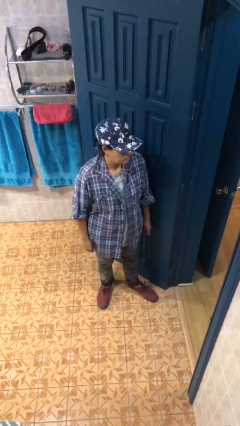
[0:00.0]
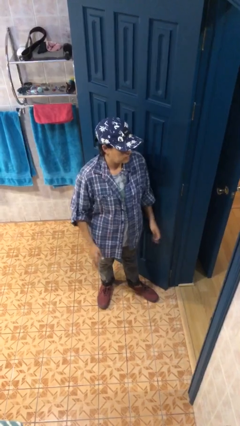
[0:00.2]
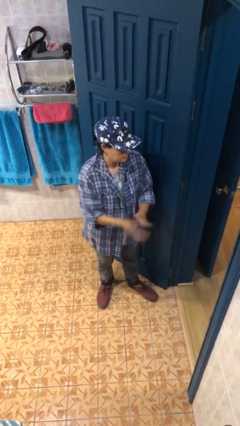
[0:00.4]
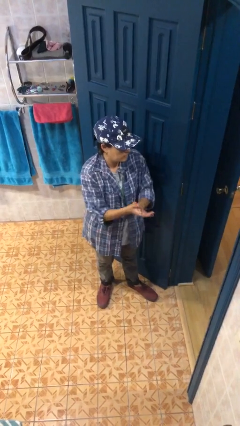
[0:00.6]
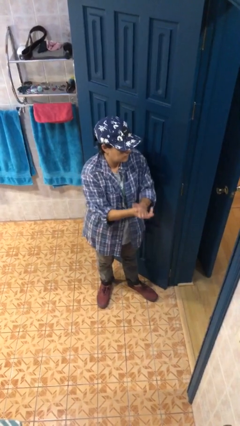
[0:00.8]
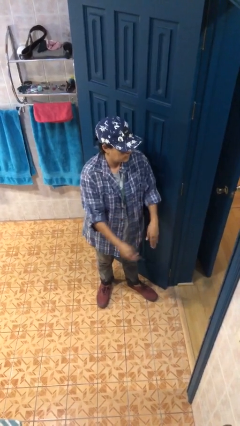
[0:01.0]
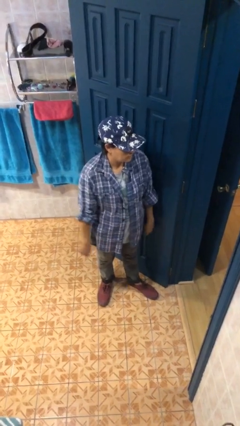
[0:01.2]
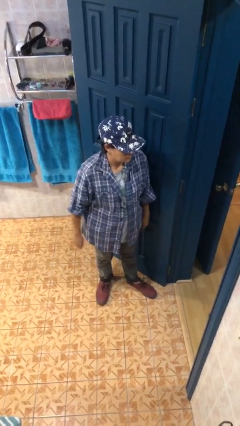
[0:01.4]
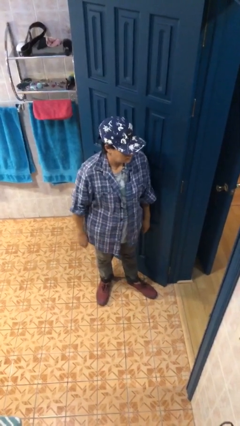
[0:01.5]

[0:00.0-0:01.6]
person claps hands

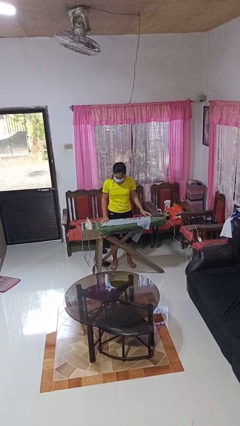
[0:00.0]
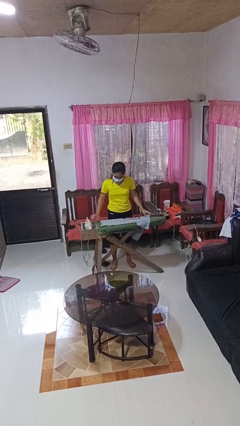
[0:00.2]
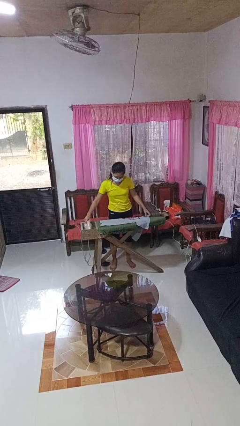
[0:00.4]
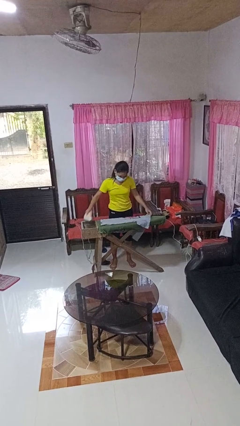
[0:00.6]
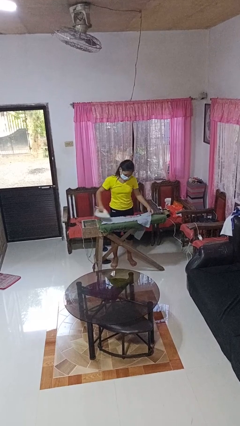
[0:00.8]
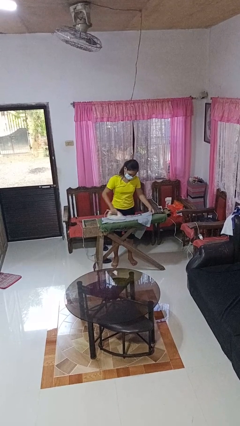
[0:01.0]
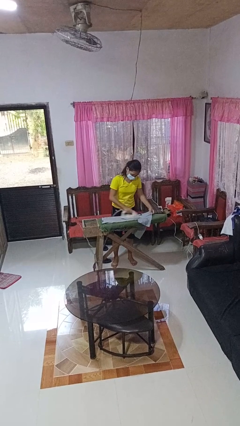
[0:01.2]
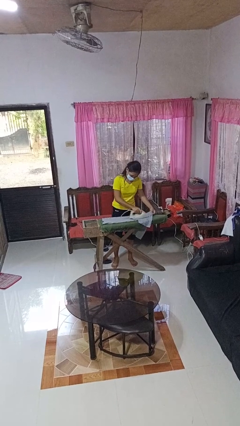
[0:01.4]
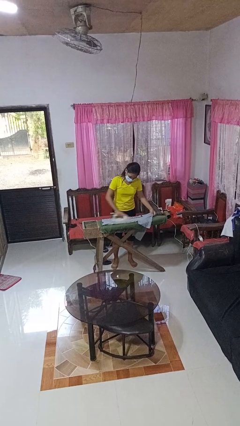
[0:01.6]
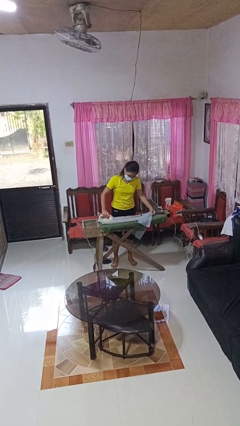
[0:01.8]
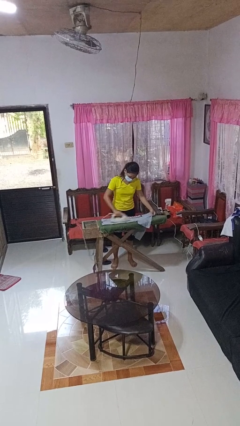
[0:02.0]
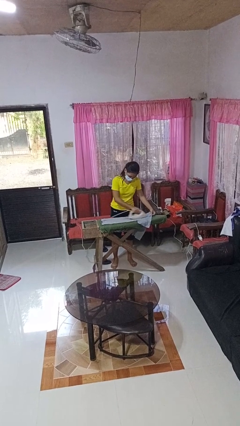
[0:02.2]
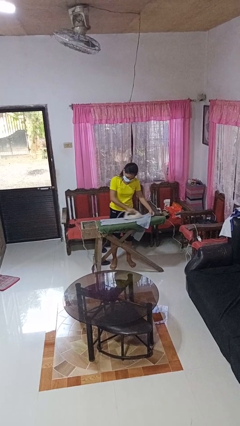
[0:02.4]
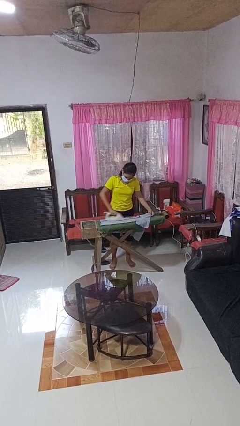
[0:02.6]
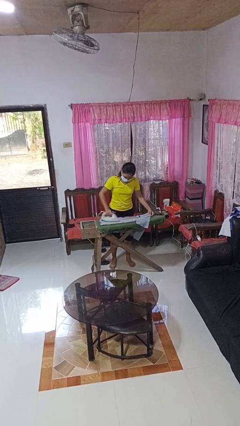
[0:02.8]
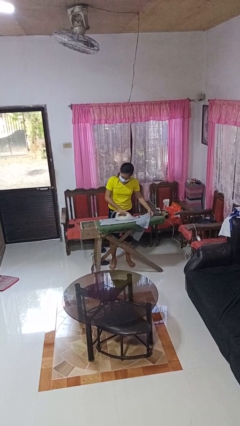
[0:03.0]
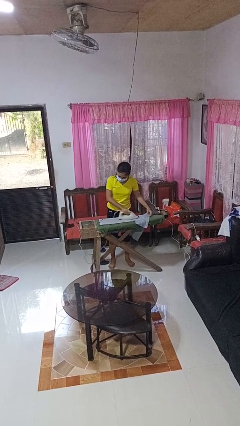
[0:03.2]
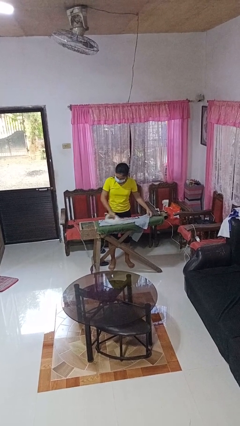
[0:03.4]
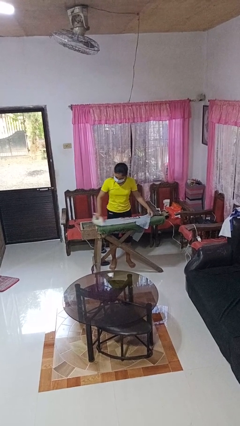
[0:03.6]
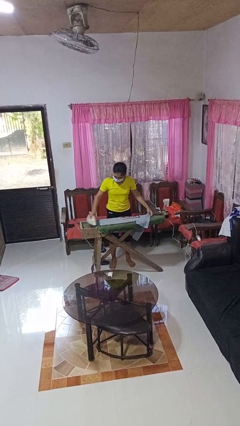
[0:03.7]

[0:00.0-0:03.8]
person irons clothes

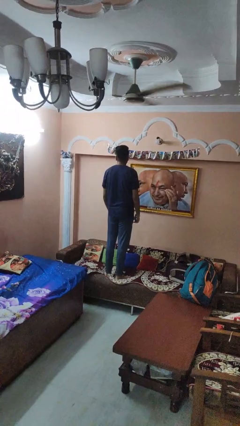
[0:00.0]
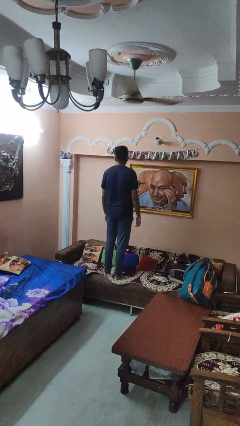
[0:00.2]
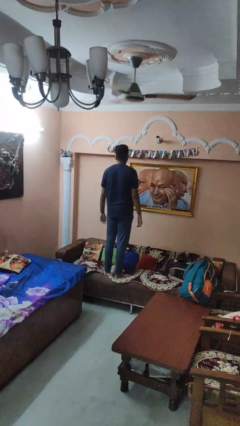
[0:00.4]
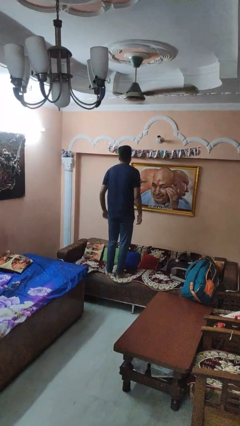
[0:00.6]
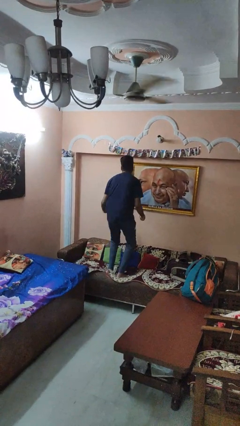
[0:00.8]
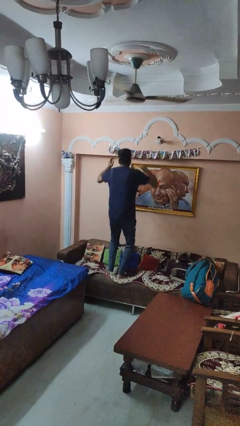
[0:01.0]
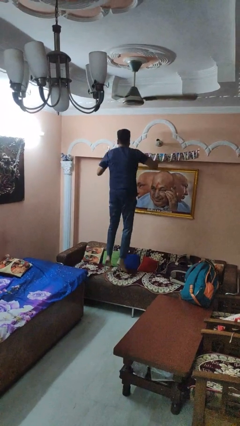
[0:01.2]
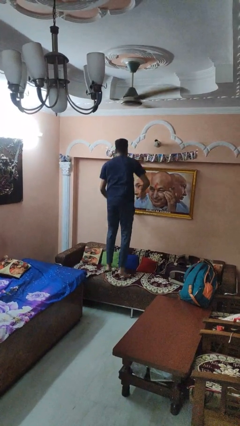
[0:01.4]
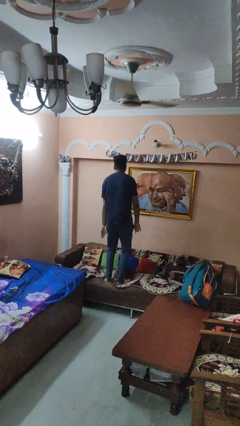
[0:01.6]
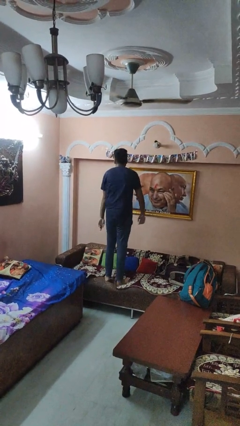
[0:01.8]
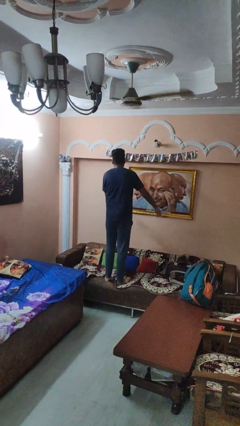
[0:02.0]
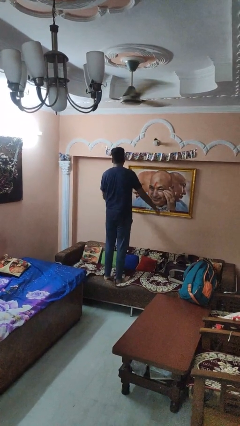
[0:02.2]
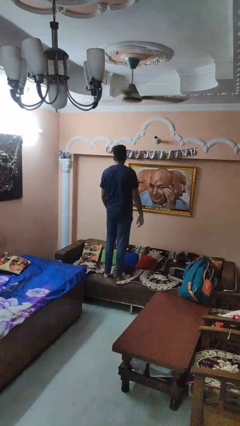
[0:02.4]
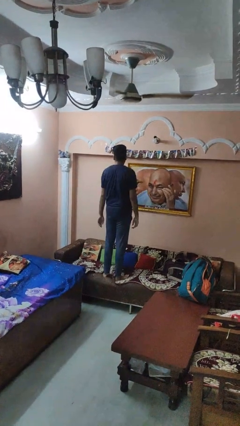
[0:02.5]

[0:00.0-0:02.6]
person jumps on couch

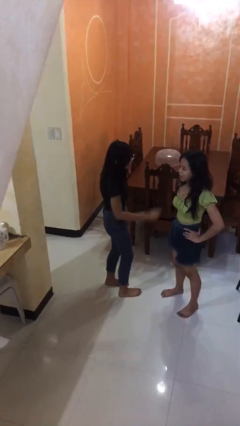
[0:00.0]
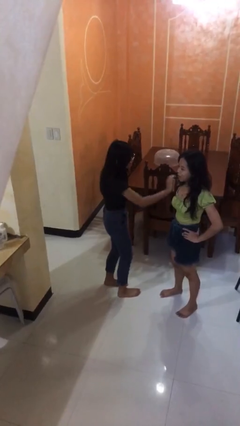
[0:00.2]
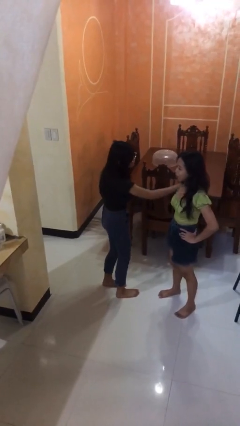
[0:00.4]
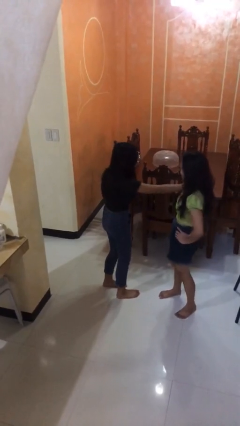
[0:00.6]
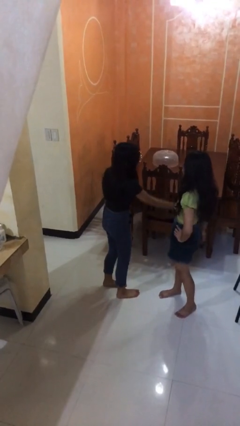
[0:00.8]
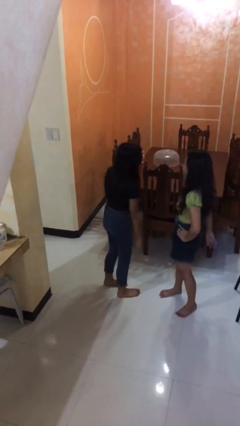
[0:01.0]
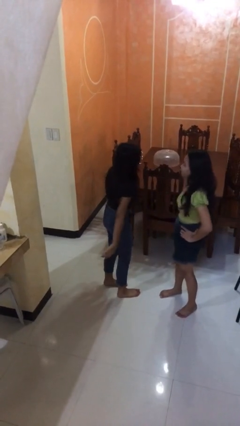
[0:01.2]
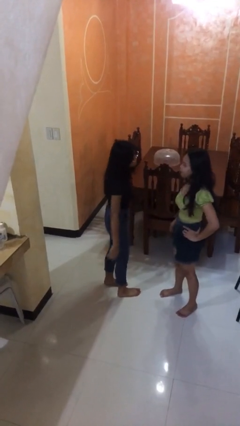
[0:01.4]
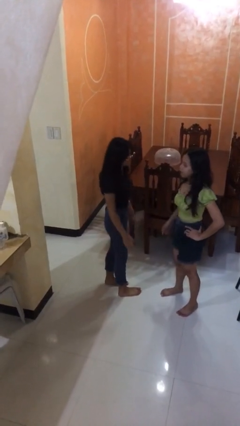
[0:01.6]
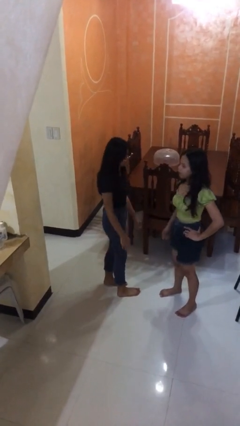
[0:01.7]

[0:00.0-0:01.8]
person shoves person

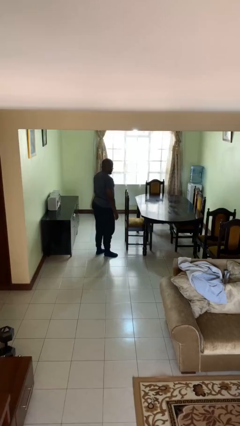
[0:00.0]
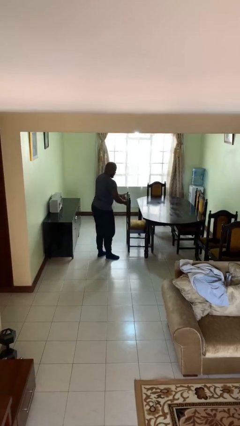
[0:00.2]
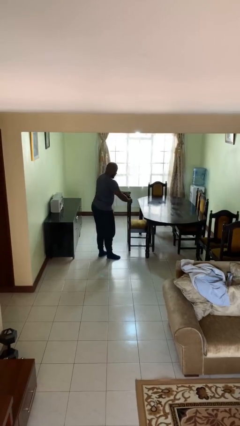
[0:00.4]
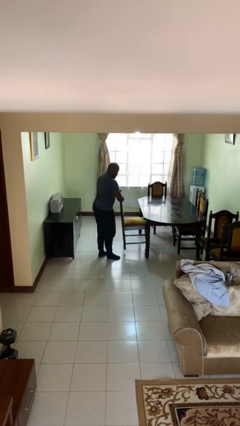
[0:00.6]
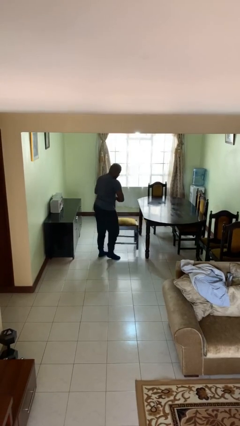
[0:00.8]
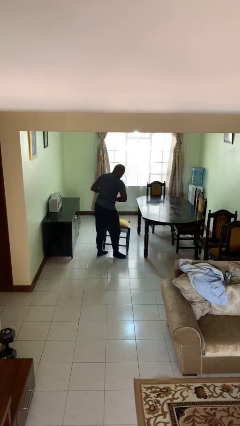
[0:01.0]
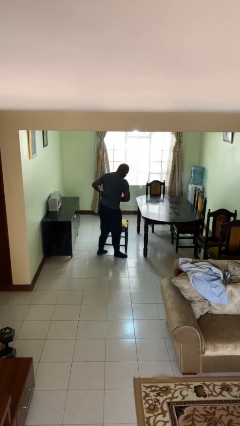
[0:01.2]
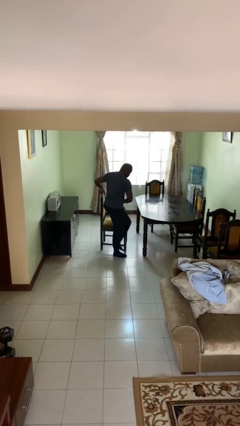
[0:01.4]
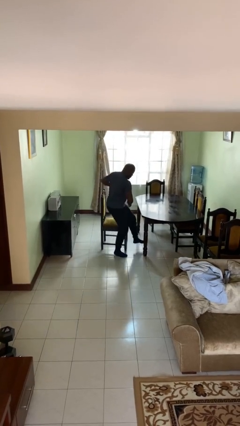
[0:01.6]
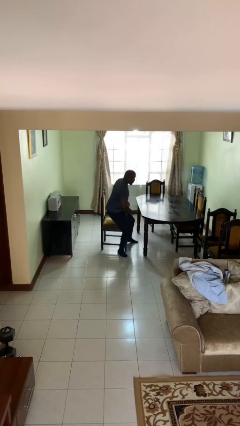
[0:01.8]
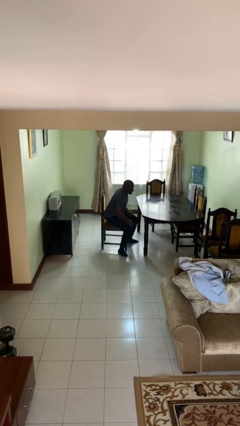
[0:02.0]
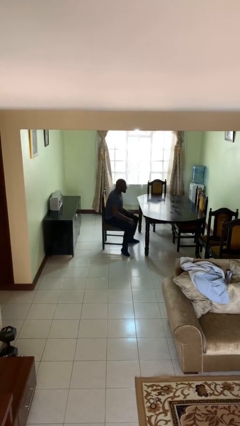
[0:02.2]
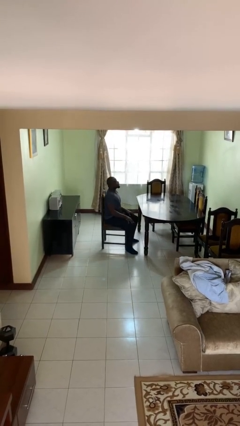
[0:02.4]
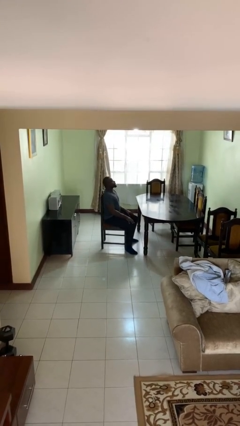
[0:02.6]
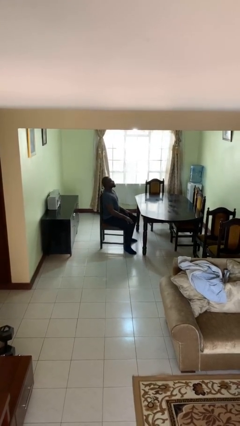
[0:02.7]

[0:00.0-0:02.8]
person sits down

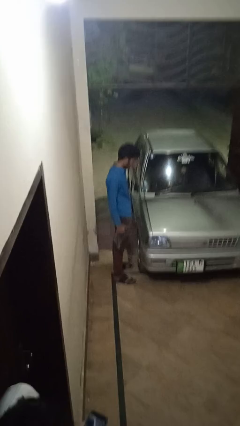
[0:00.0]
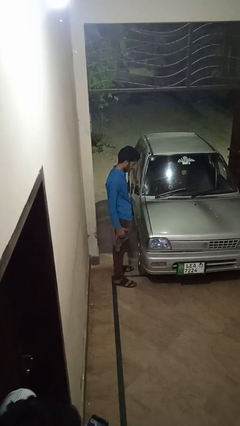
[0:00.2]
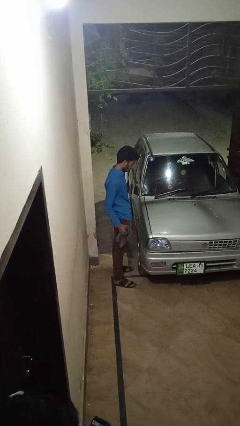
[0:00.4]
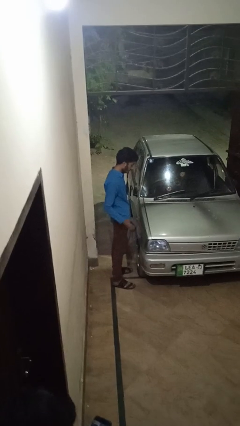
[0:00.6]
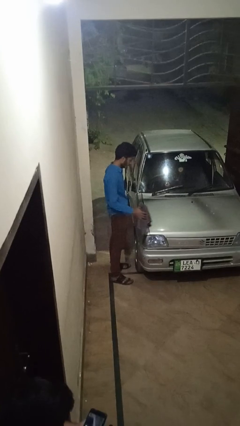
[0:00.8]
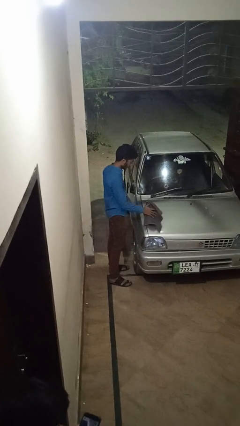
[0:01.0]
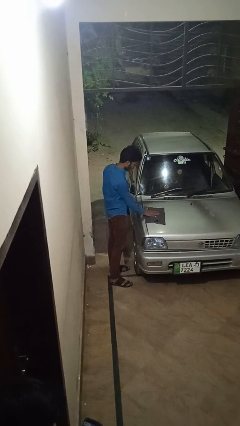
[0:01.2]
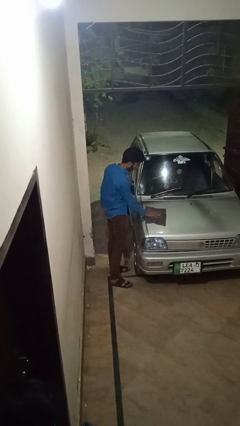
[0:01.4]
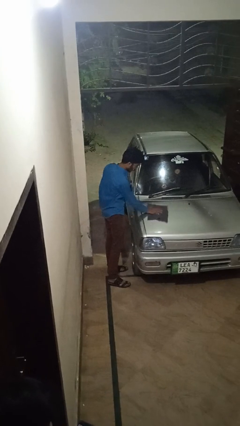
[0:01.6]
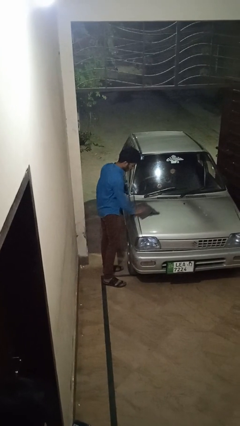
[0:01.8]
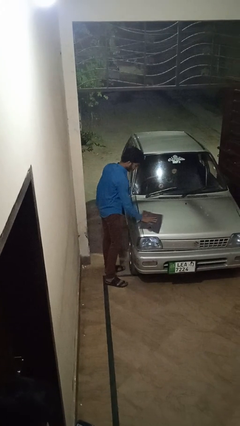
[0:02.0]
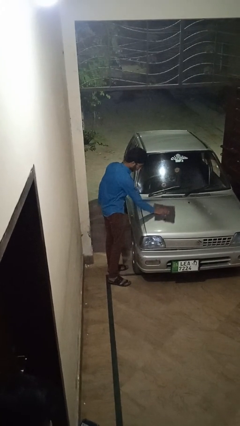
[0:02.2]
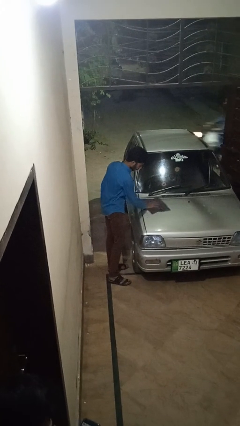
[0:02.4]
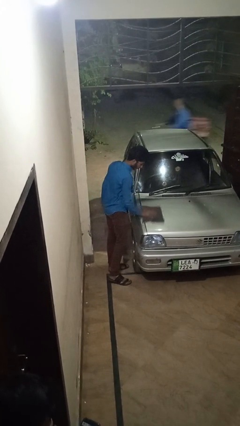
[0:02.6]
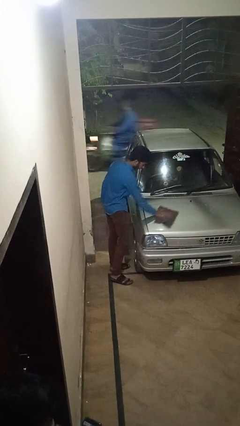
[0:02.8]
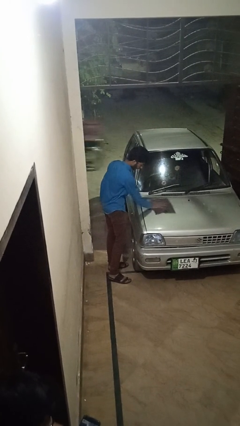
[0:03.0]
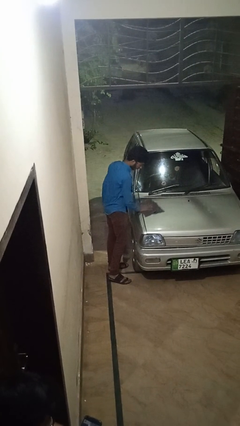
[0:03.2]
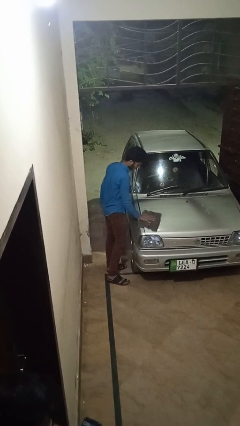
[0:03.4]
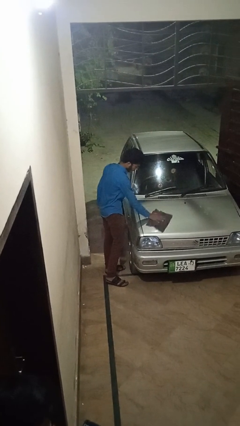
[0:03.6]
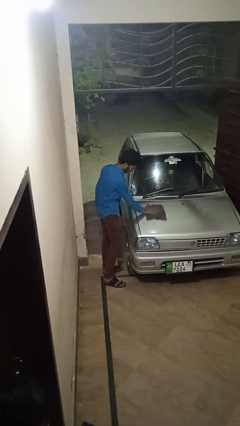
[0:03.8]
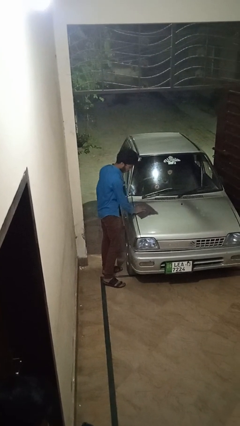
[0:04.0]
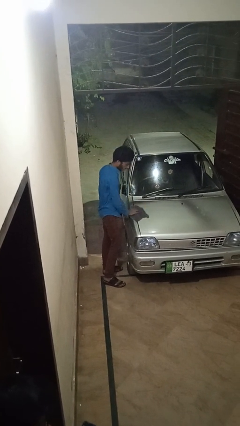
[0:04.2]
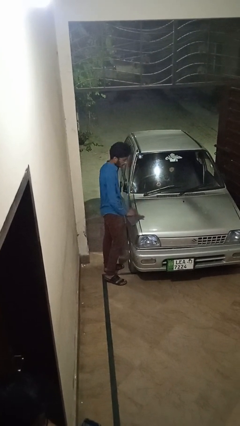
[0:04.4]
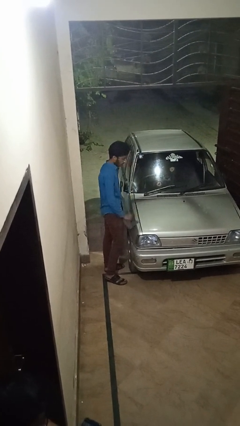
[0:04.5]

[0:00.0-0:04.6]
person polishes car with rag
